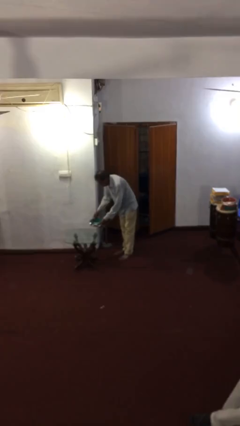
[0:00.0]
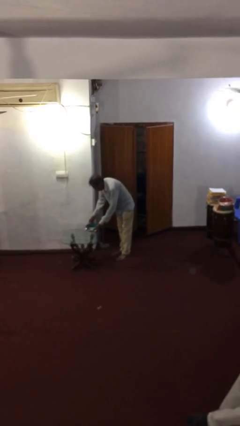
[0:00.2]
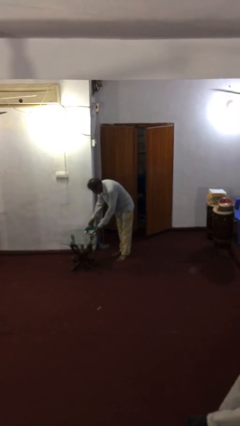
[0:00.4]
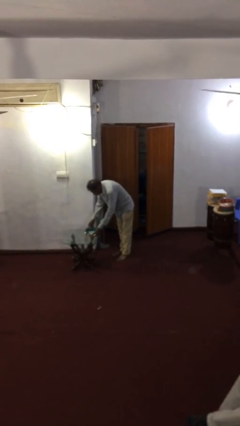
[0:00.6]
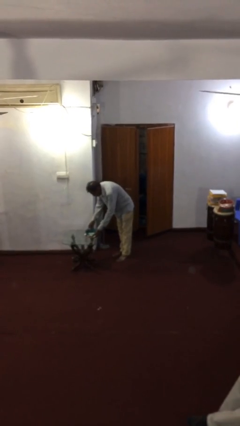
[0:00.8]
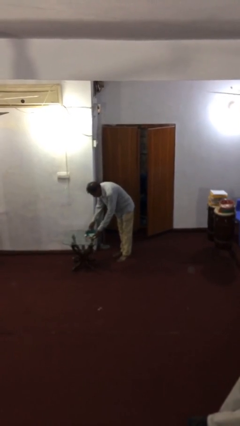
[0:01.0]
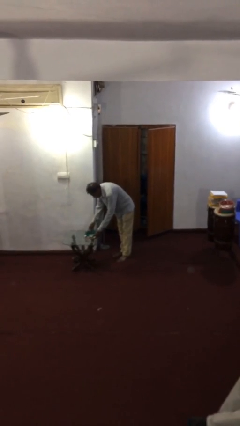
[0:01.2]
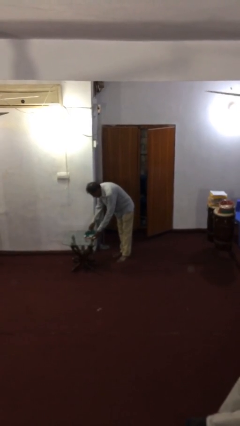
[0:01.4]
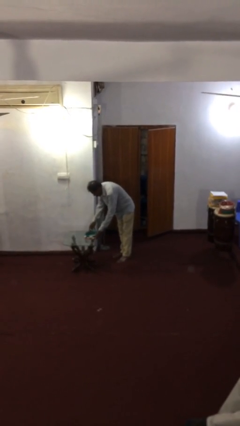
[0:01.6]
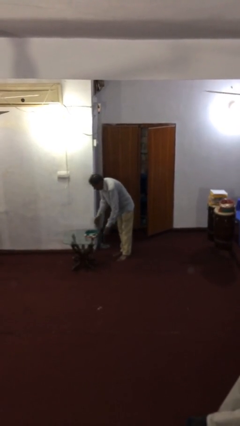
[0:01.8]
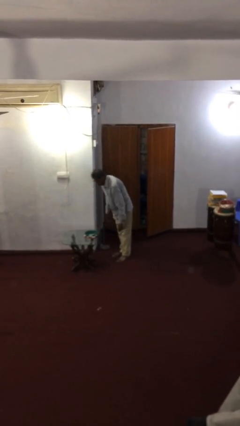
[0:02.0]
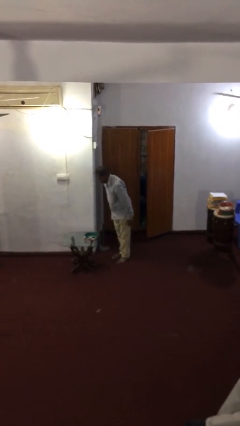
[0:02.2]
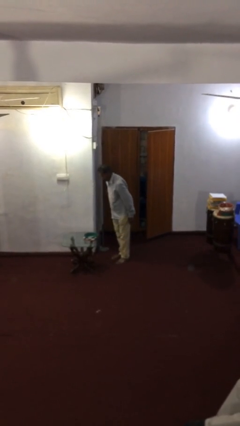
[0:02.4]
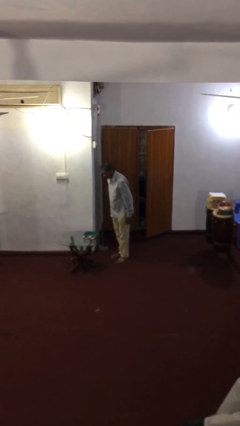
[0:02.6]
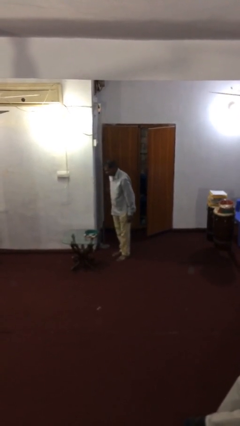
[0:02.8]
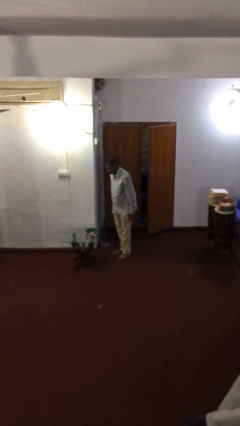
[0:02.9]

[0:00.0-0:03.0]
person puts down object on table

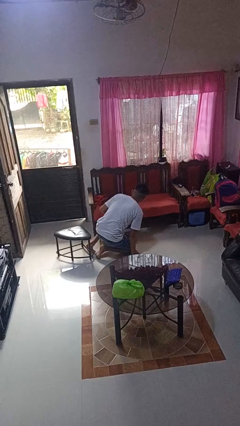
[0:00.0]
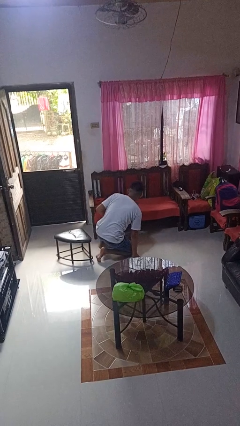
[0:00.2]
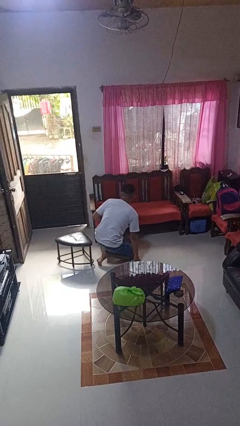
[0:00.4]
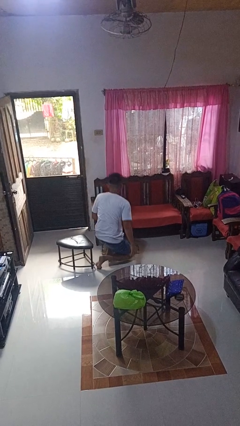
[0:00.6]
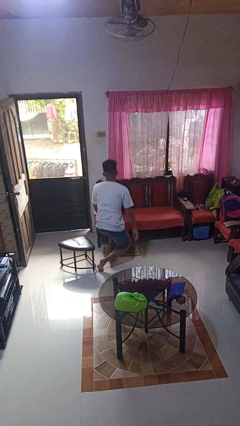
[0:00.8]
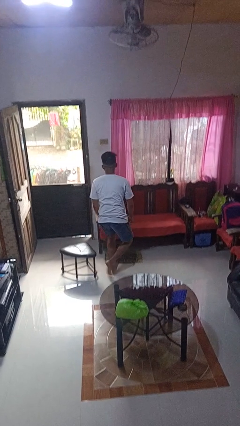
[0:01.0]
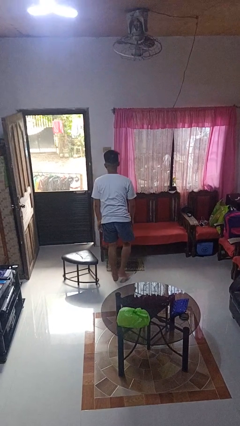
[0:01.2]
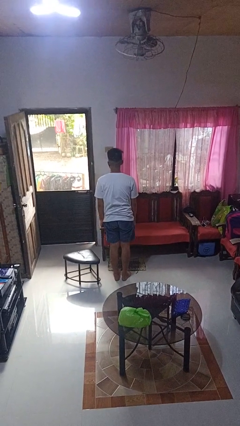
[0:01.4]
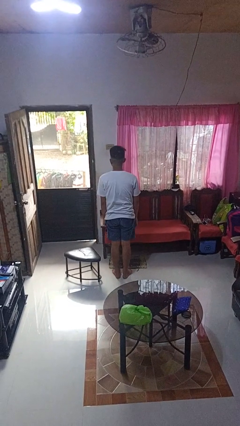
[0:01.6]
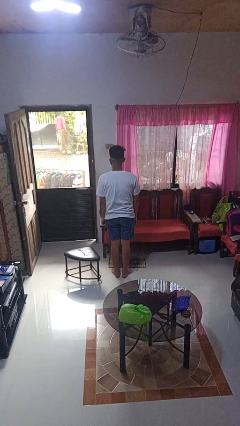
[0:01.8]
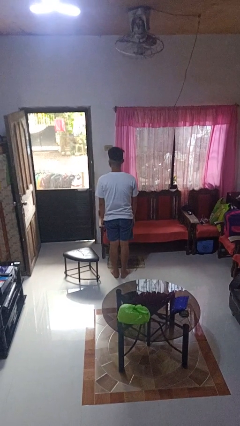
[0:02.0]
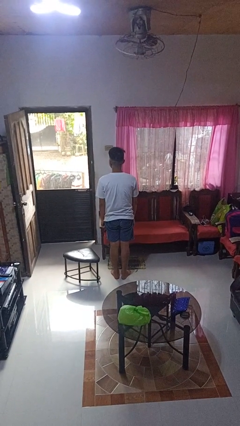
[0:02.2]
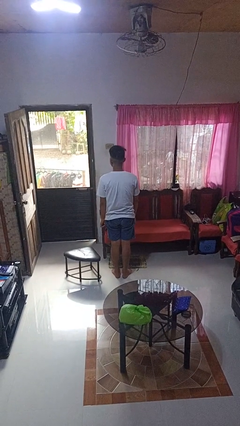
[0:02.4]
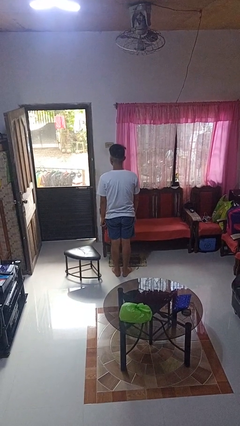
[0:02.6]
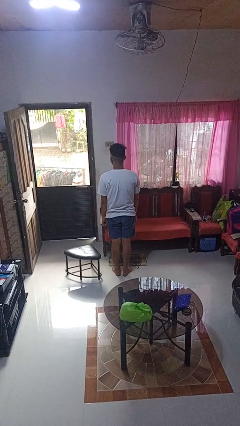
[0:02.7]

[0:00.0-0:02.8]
person stands up from floor

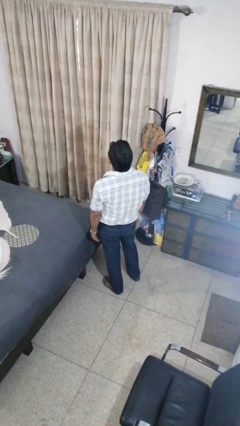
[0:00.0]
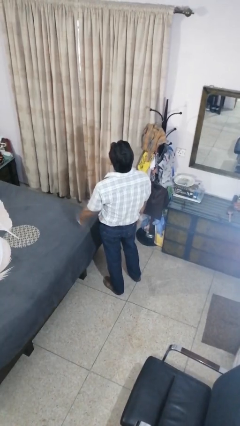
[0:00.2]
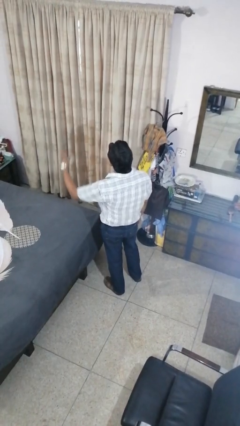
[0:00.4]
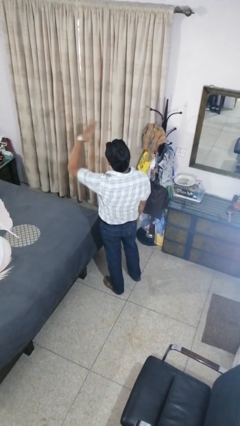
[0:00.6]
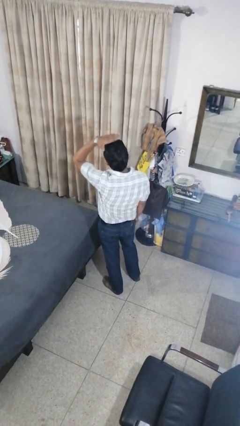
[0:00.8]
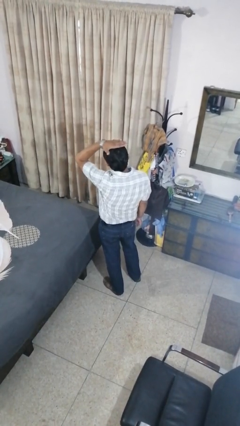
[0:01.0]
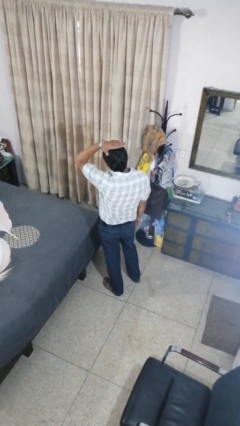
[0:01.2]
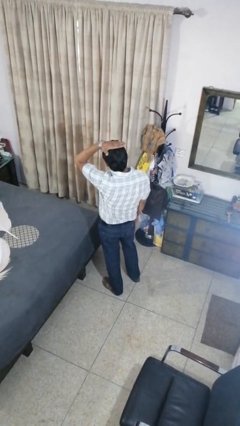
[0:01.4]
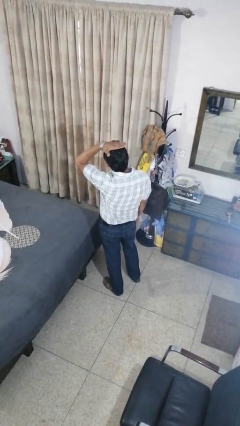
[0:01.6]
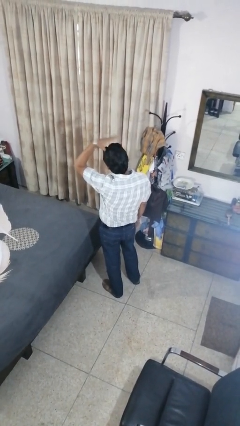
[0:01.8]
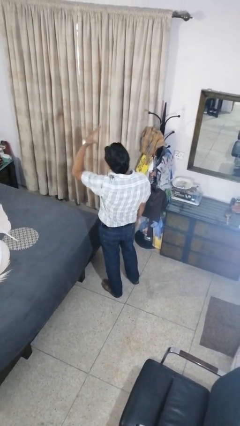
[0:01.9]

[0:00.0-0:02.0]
person pats head

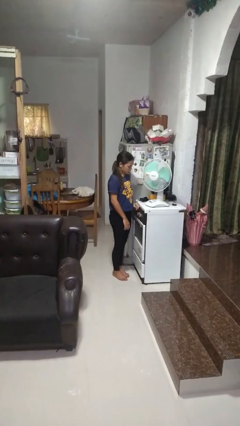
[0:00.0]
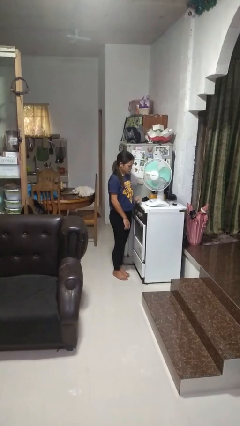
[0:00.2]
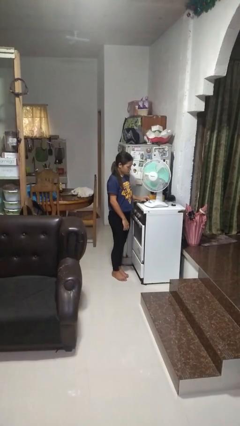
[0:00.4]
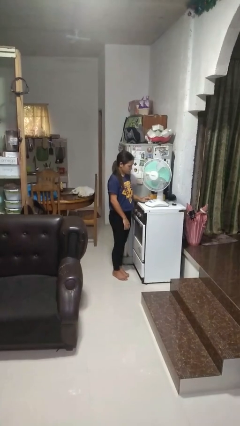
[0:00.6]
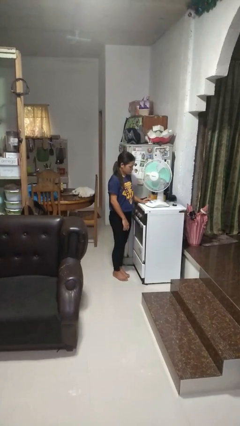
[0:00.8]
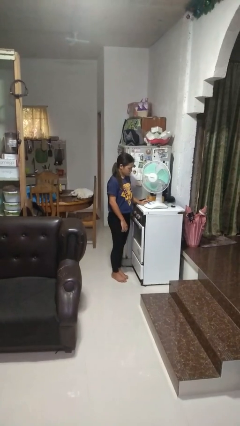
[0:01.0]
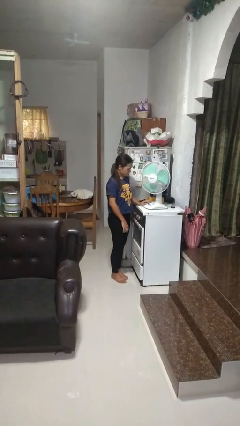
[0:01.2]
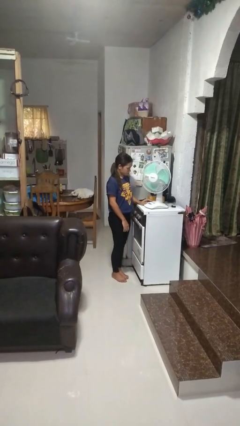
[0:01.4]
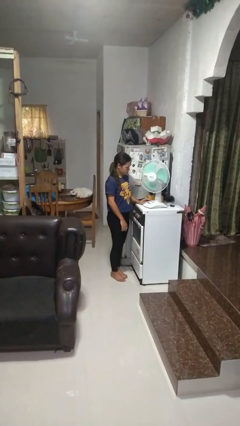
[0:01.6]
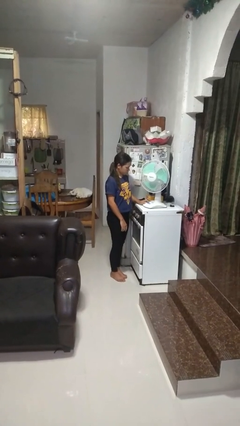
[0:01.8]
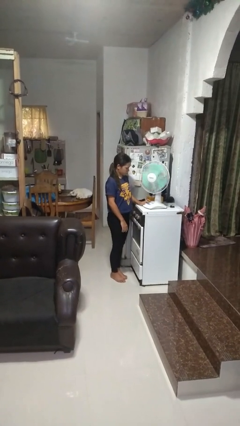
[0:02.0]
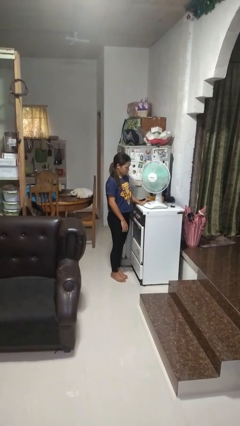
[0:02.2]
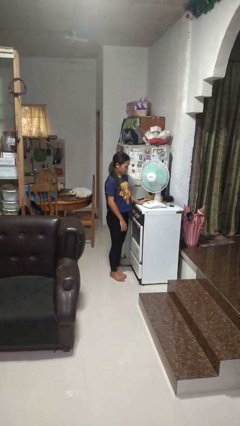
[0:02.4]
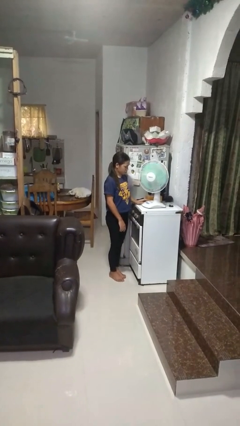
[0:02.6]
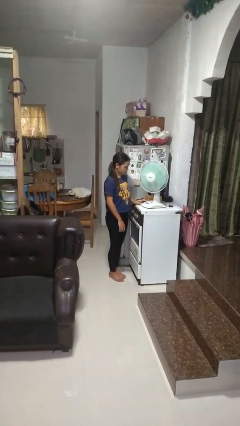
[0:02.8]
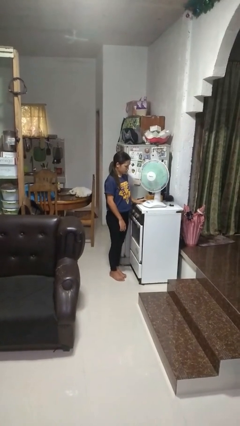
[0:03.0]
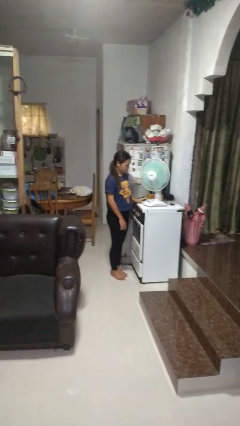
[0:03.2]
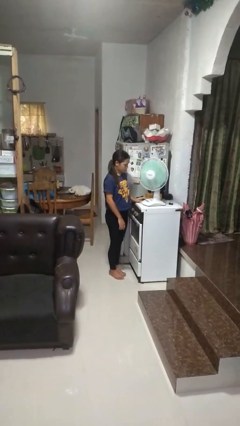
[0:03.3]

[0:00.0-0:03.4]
person turns on fan

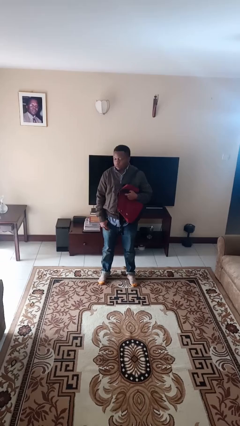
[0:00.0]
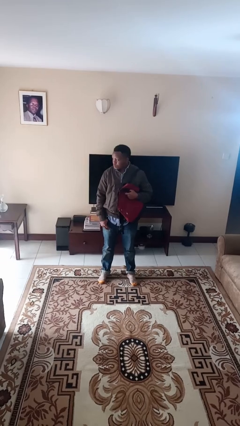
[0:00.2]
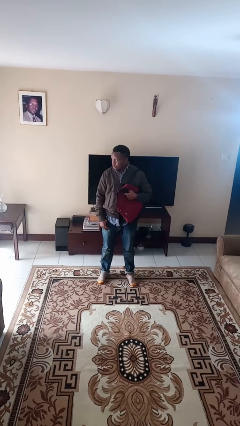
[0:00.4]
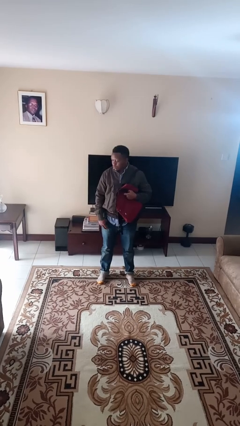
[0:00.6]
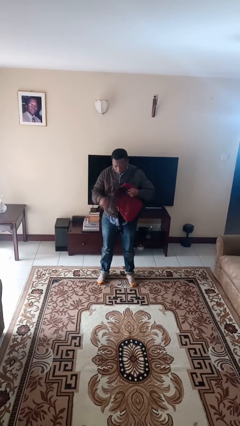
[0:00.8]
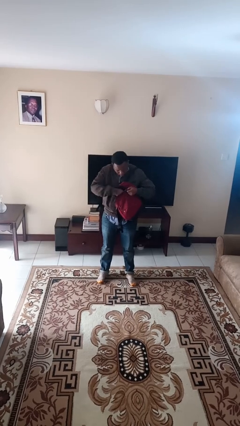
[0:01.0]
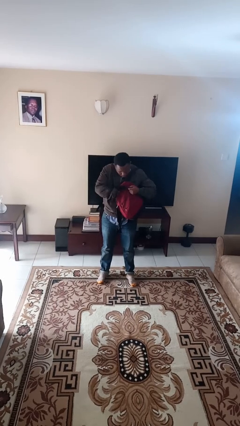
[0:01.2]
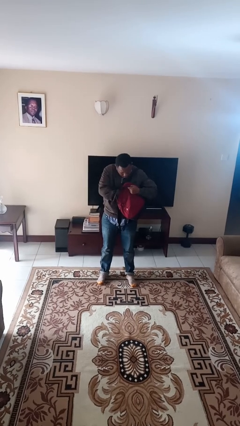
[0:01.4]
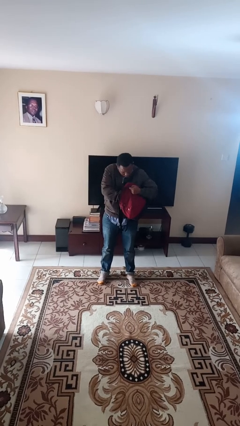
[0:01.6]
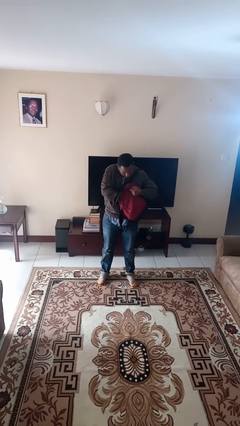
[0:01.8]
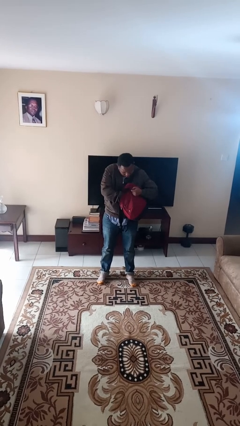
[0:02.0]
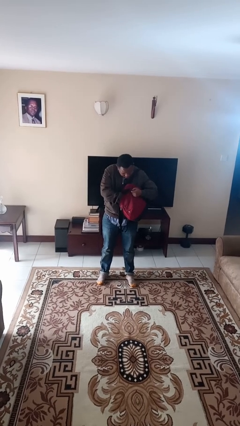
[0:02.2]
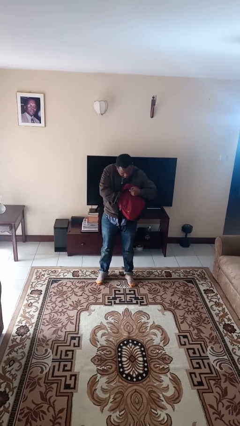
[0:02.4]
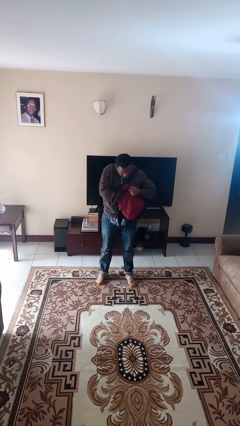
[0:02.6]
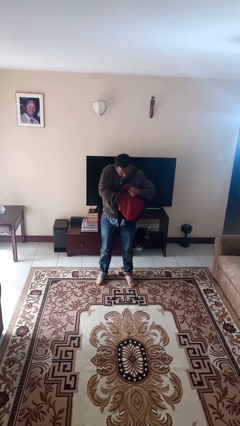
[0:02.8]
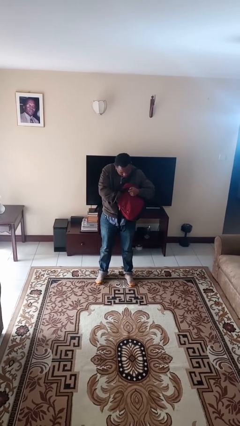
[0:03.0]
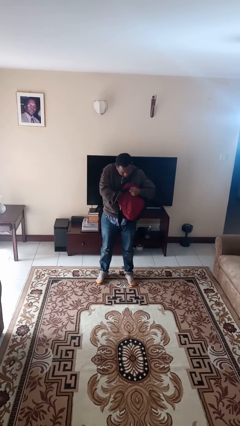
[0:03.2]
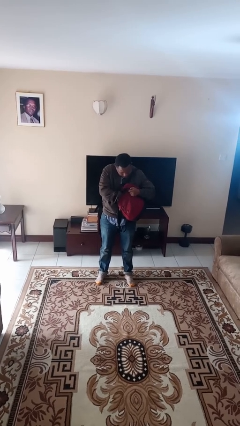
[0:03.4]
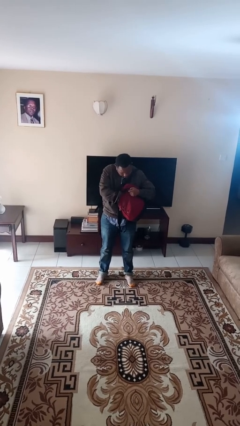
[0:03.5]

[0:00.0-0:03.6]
person searches in backpack

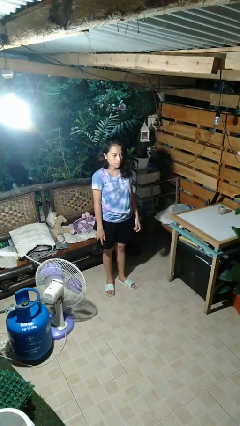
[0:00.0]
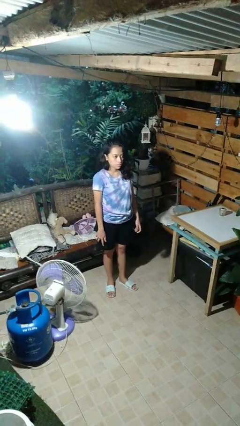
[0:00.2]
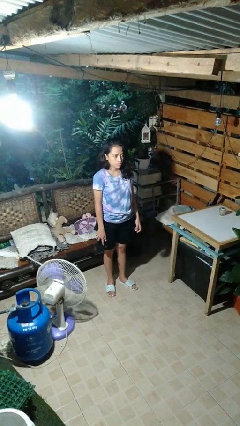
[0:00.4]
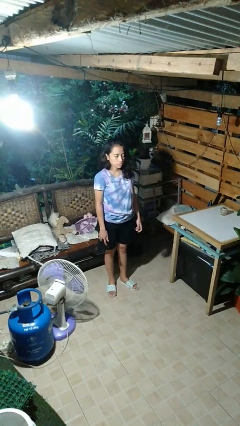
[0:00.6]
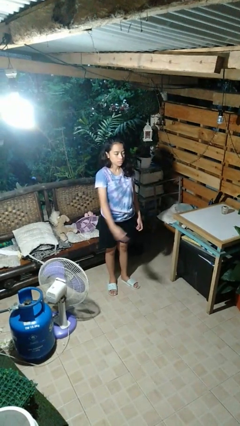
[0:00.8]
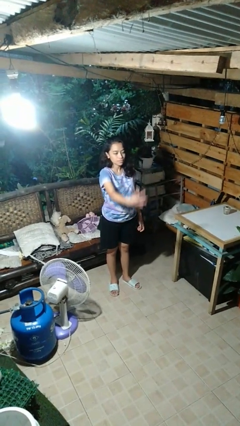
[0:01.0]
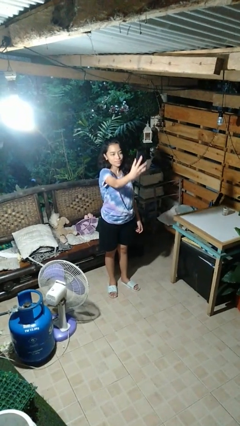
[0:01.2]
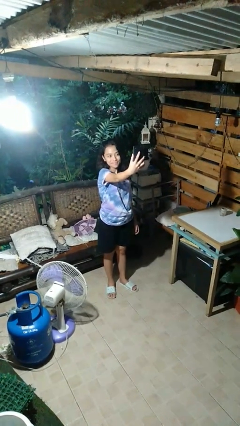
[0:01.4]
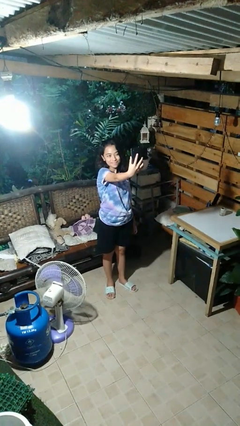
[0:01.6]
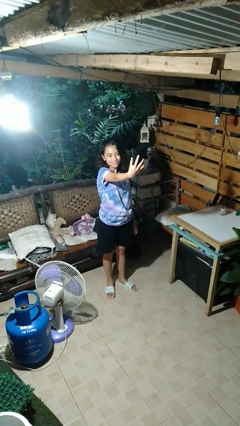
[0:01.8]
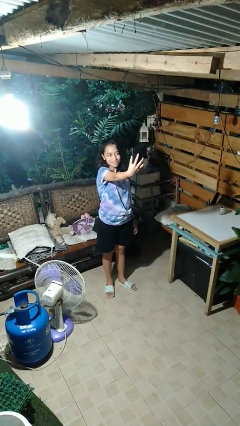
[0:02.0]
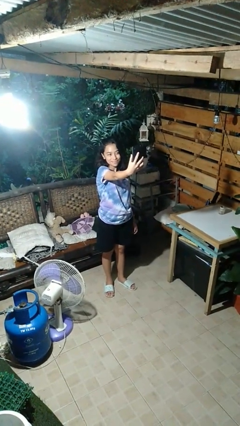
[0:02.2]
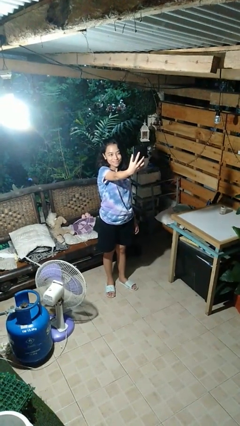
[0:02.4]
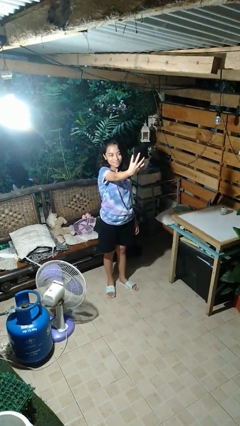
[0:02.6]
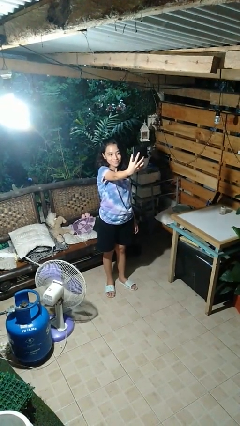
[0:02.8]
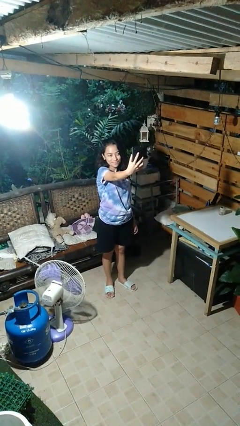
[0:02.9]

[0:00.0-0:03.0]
person takes selfie
